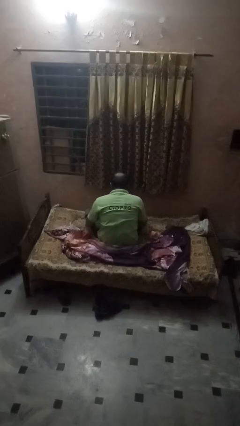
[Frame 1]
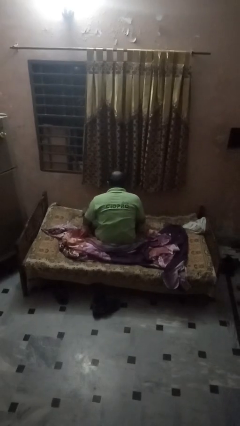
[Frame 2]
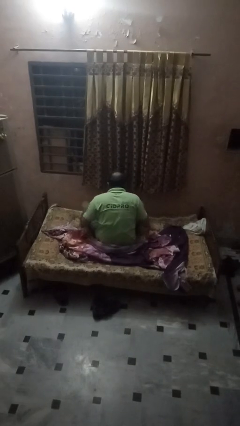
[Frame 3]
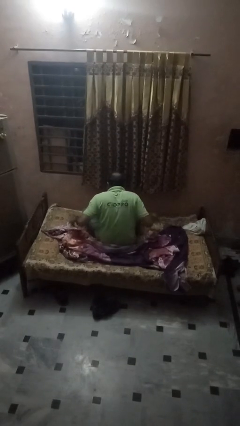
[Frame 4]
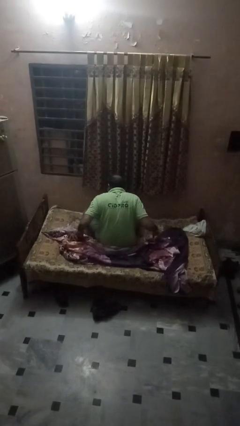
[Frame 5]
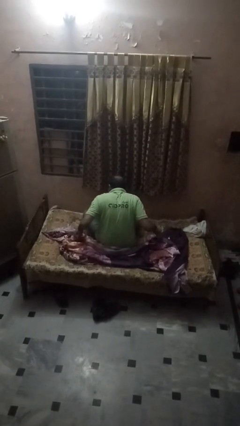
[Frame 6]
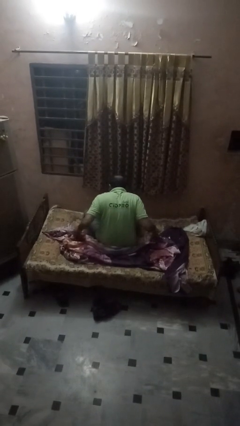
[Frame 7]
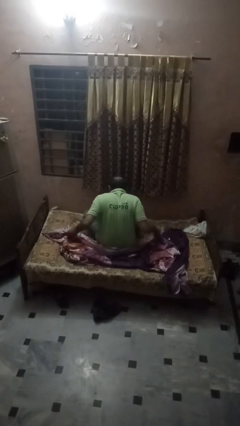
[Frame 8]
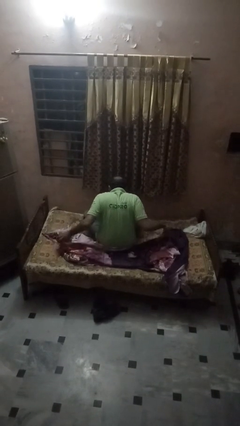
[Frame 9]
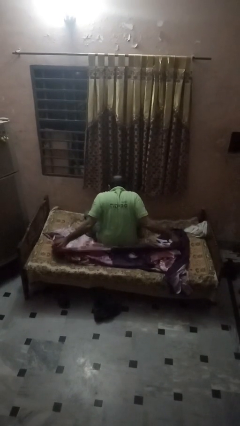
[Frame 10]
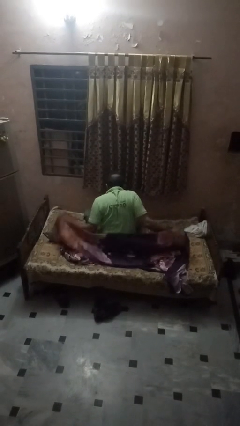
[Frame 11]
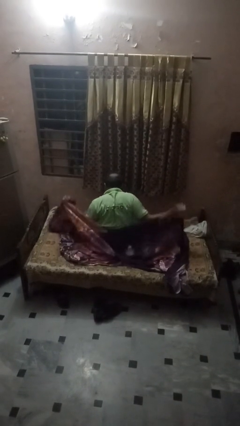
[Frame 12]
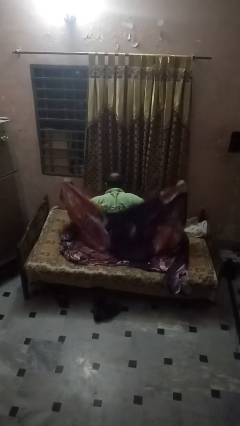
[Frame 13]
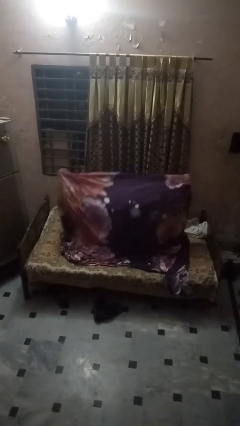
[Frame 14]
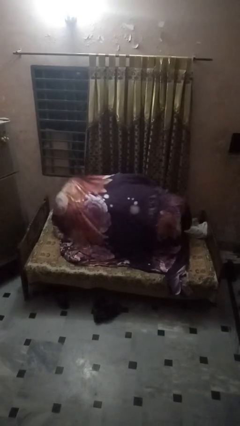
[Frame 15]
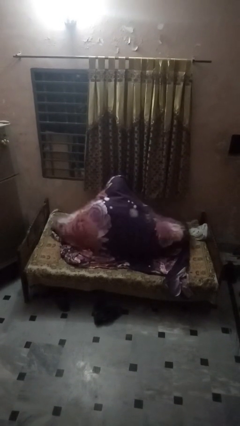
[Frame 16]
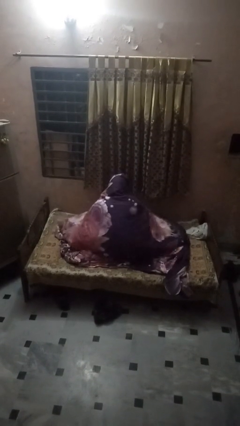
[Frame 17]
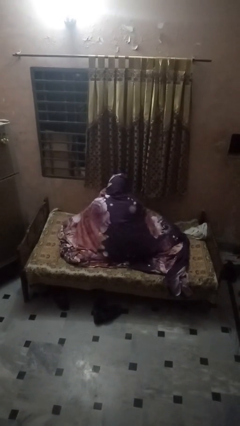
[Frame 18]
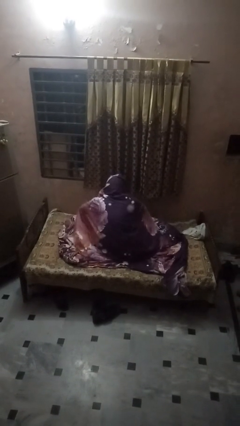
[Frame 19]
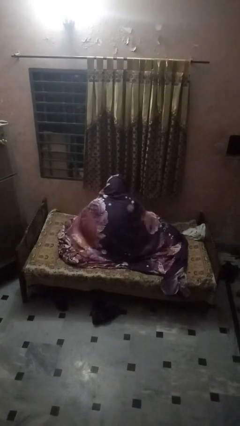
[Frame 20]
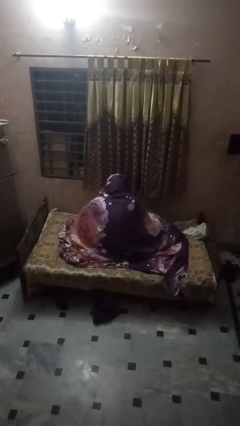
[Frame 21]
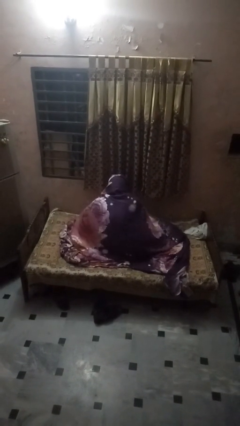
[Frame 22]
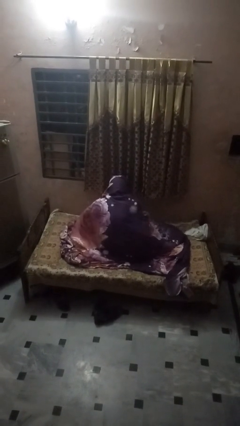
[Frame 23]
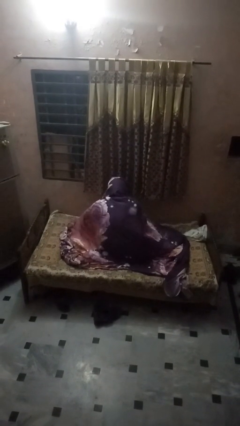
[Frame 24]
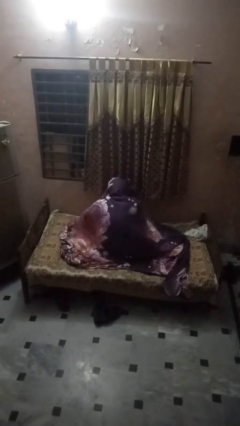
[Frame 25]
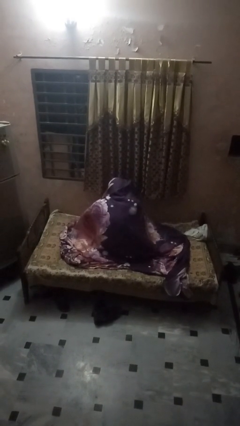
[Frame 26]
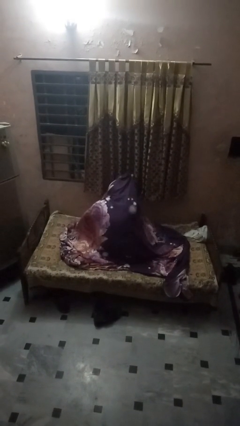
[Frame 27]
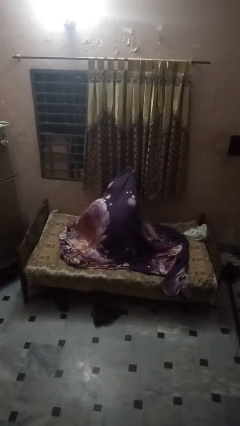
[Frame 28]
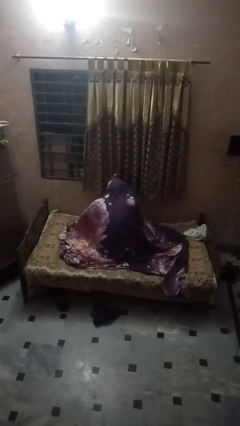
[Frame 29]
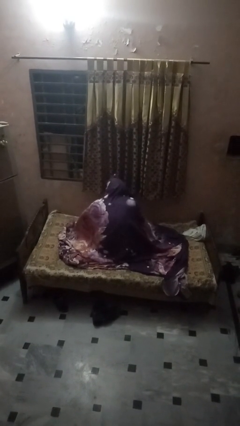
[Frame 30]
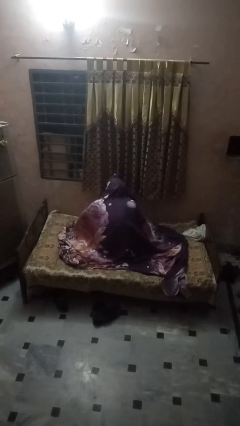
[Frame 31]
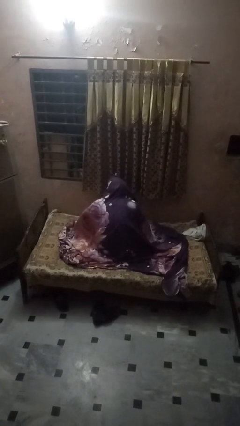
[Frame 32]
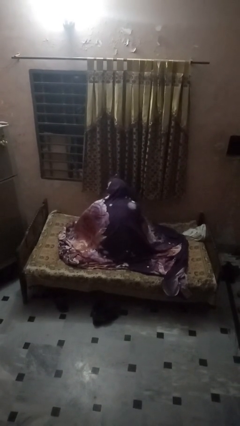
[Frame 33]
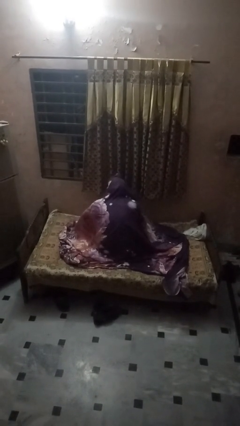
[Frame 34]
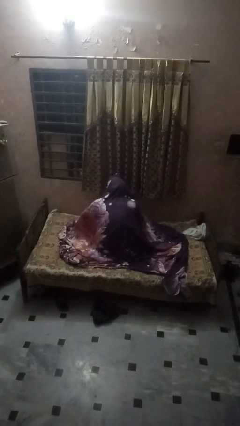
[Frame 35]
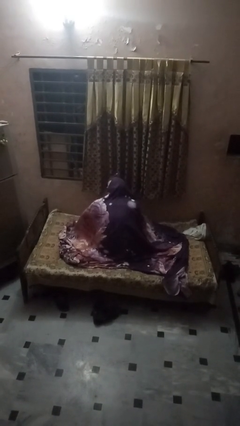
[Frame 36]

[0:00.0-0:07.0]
person covers with bedsheets

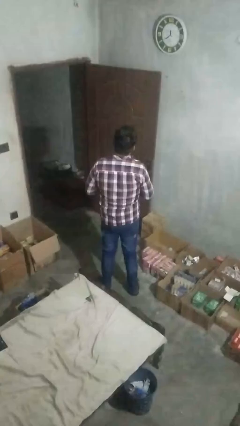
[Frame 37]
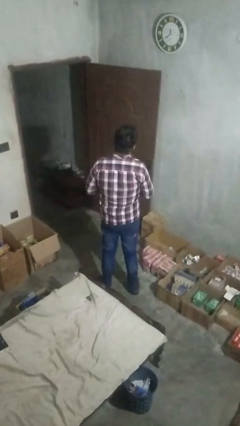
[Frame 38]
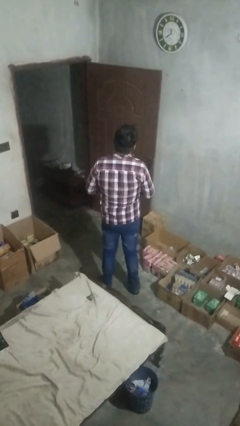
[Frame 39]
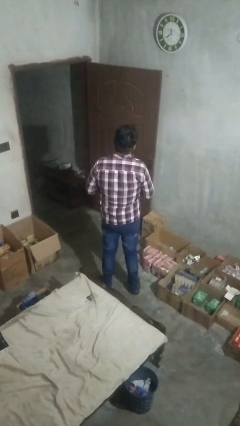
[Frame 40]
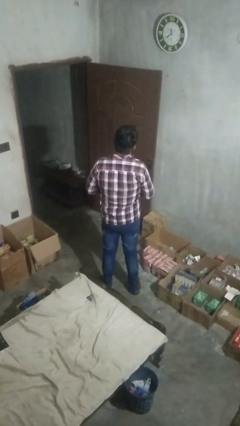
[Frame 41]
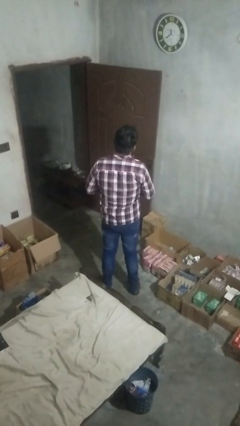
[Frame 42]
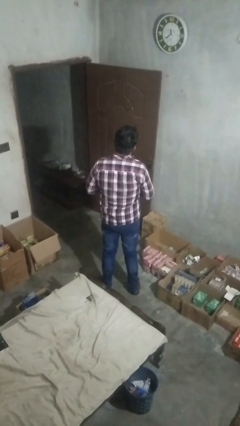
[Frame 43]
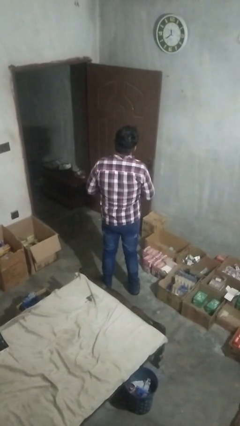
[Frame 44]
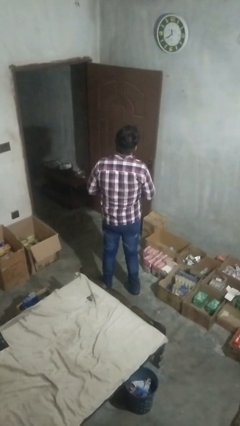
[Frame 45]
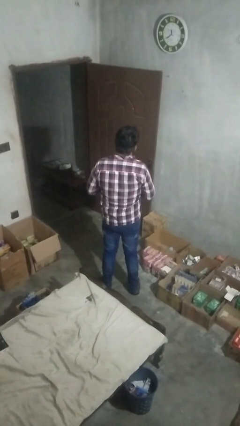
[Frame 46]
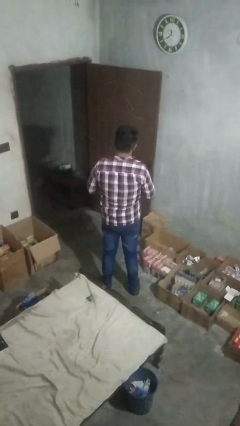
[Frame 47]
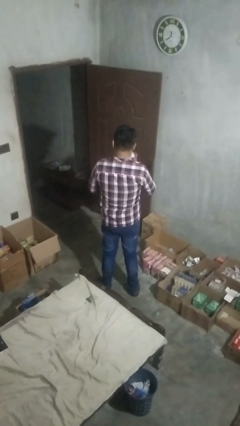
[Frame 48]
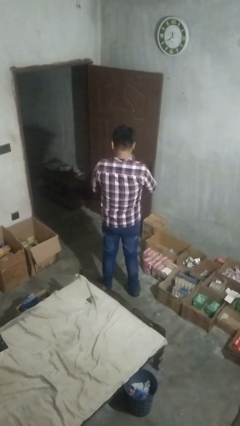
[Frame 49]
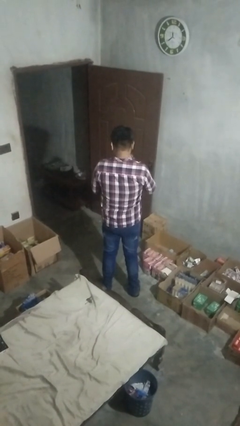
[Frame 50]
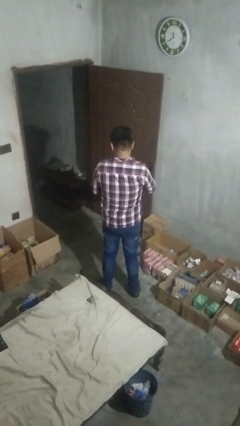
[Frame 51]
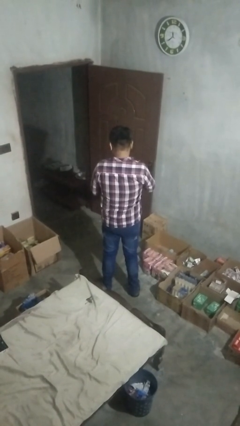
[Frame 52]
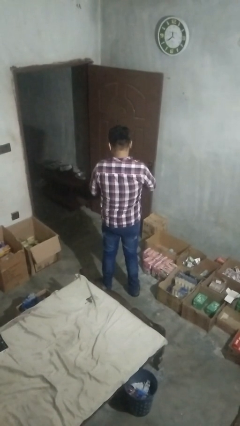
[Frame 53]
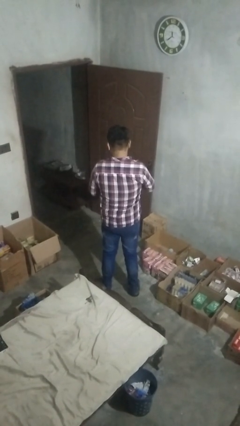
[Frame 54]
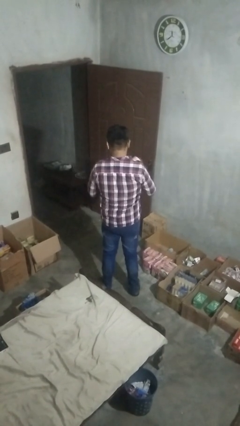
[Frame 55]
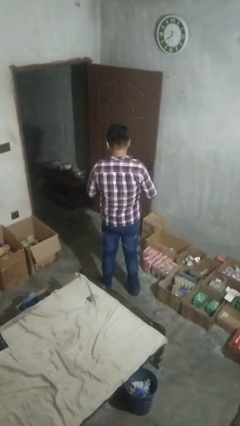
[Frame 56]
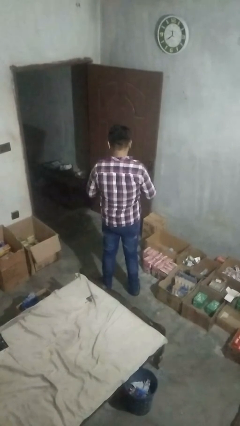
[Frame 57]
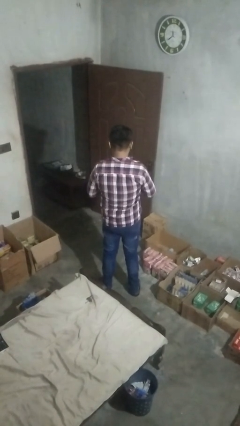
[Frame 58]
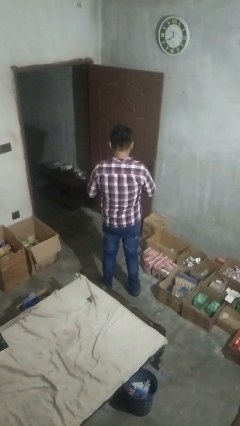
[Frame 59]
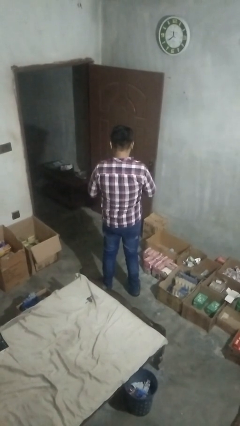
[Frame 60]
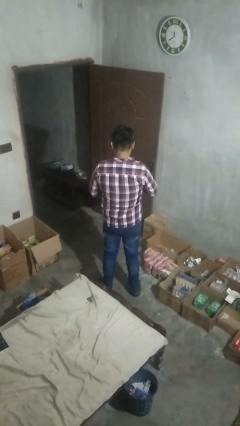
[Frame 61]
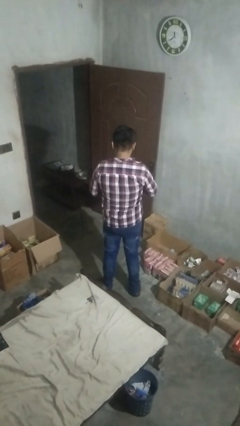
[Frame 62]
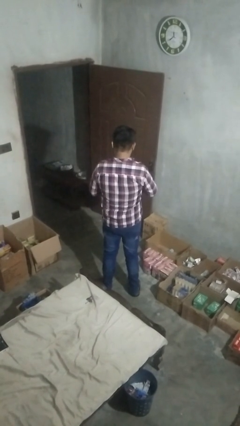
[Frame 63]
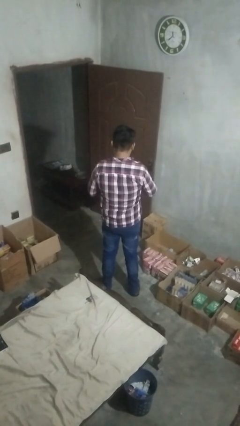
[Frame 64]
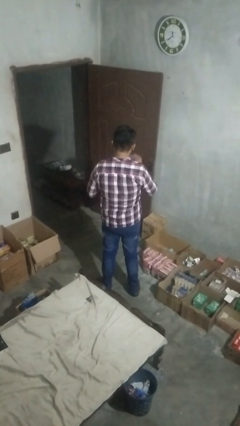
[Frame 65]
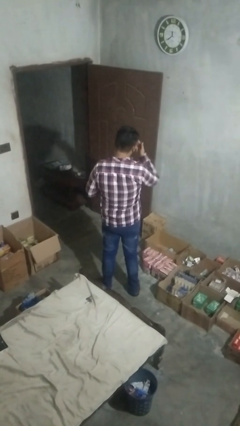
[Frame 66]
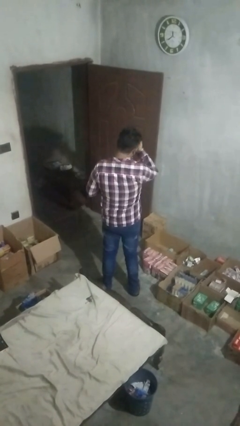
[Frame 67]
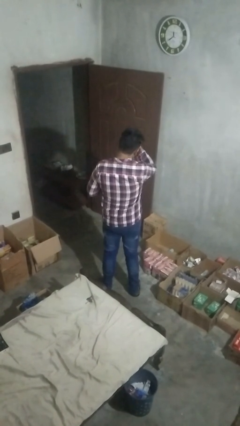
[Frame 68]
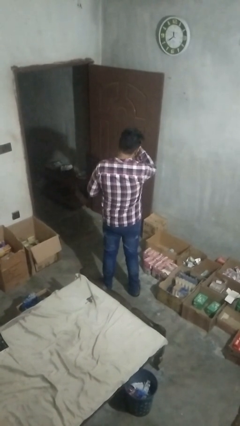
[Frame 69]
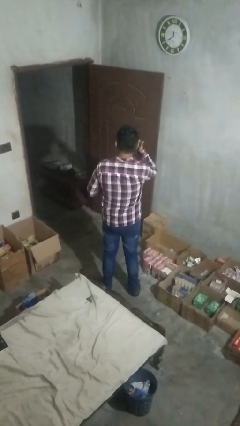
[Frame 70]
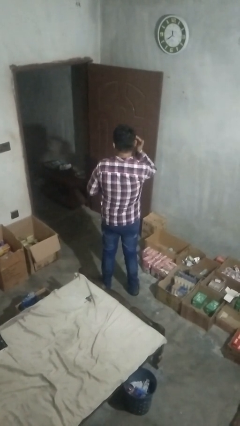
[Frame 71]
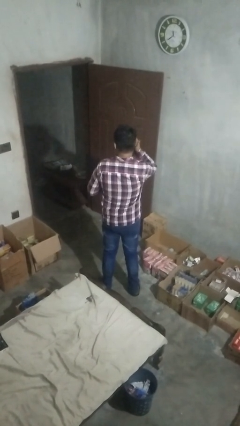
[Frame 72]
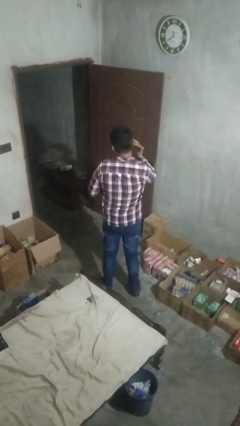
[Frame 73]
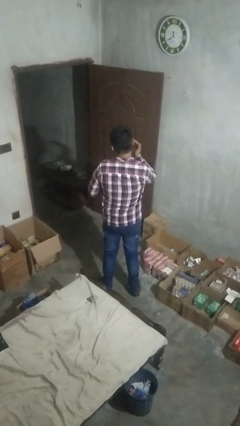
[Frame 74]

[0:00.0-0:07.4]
person applies facial moisturizer

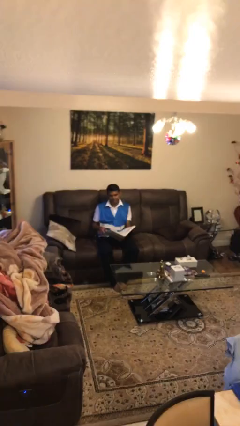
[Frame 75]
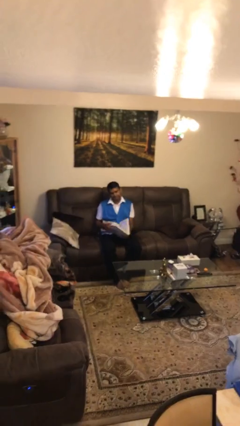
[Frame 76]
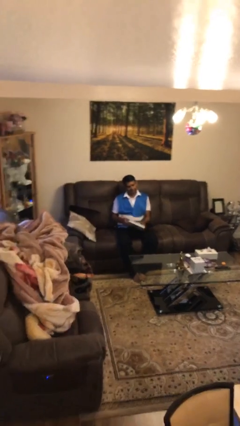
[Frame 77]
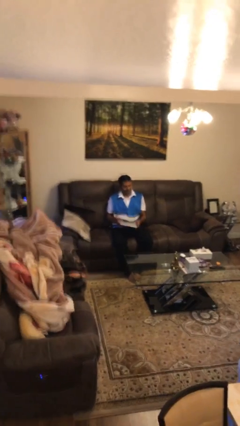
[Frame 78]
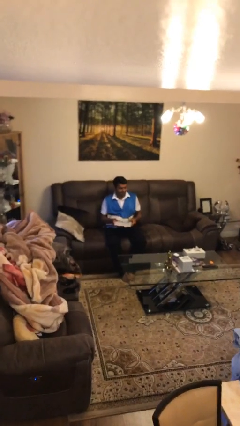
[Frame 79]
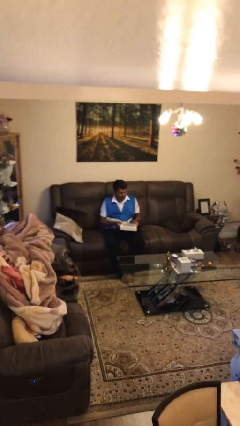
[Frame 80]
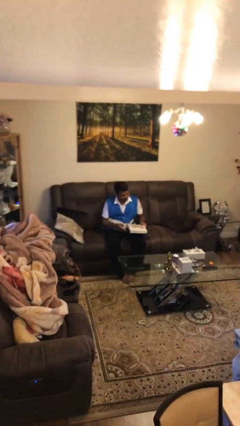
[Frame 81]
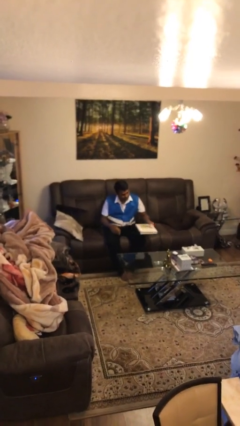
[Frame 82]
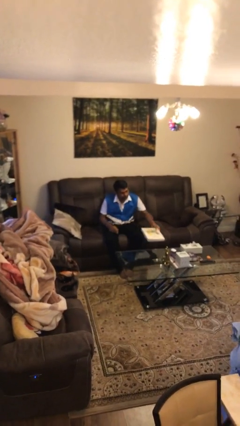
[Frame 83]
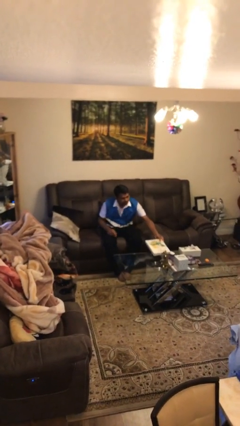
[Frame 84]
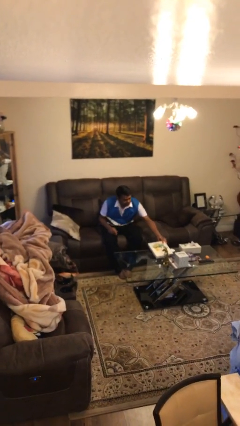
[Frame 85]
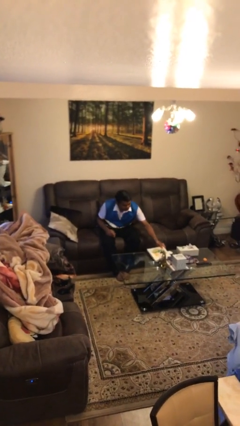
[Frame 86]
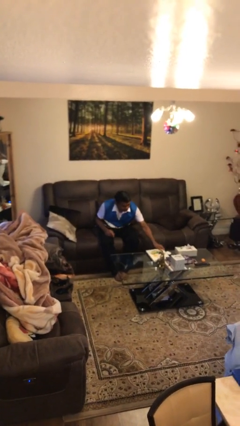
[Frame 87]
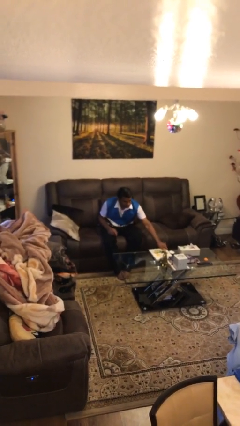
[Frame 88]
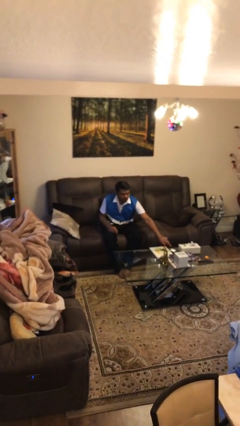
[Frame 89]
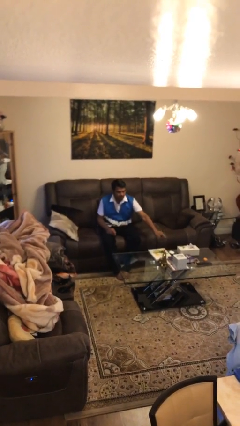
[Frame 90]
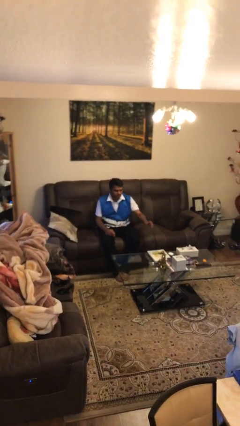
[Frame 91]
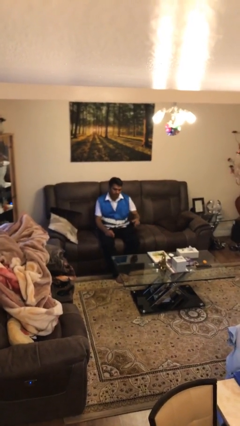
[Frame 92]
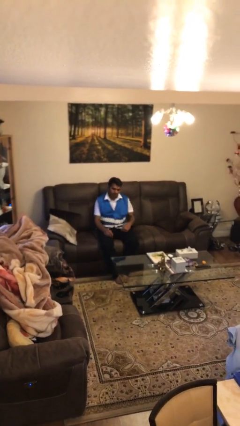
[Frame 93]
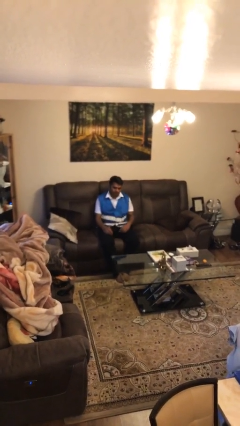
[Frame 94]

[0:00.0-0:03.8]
person puts down object on table
